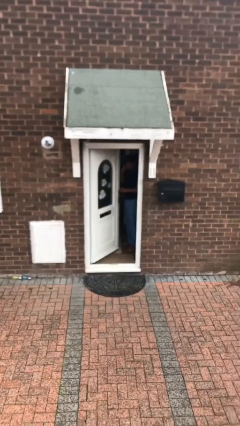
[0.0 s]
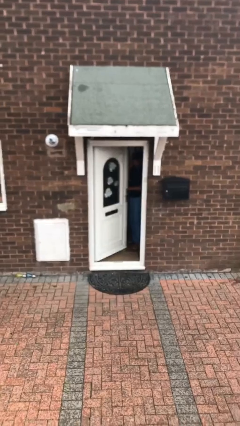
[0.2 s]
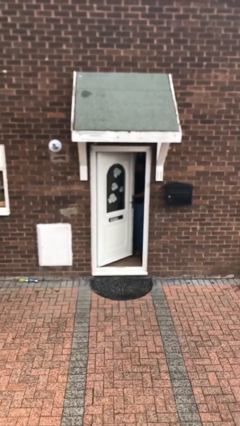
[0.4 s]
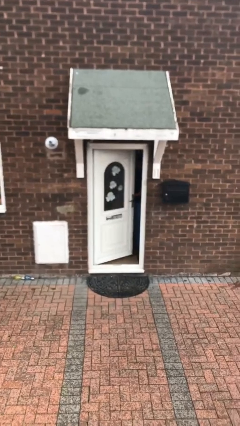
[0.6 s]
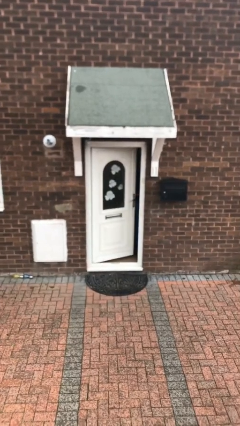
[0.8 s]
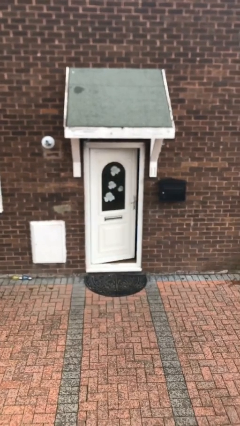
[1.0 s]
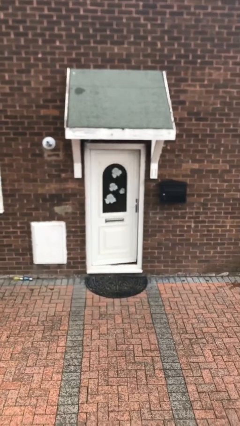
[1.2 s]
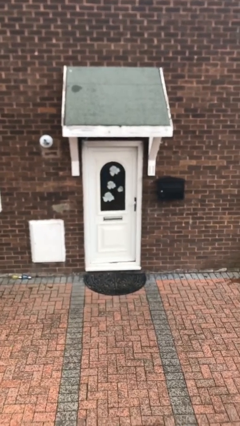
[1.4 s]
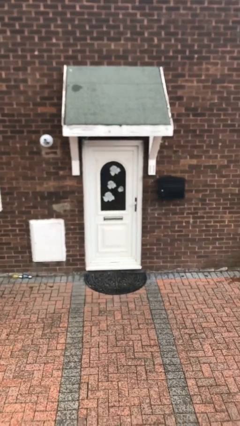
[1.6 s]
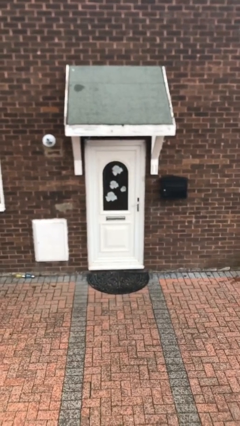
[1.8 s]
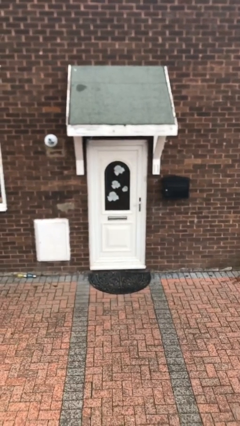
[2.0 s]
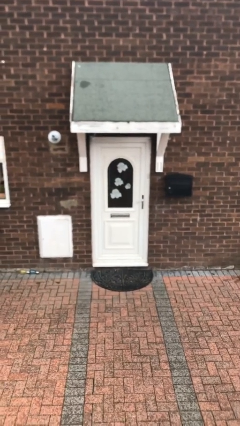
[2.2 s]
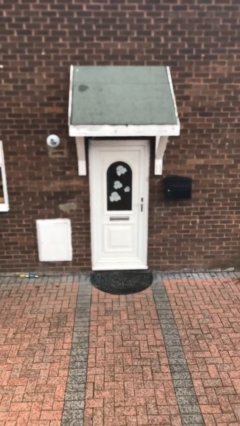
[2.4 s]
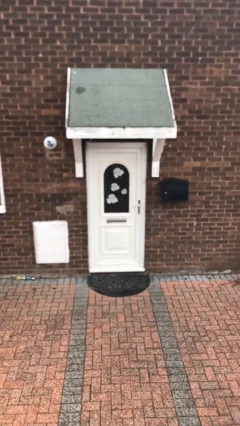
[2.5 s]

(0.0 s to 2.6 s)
person closes facility door

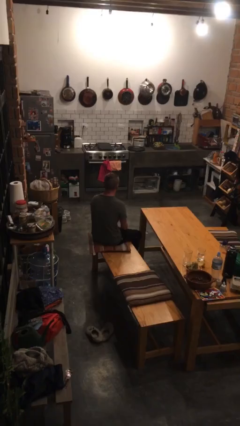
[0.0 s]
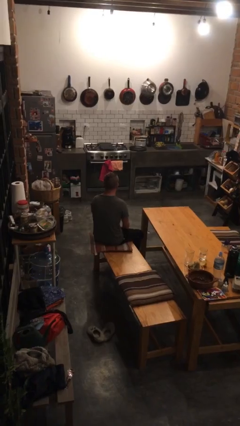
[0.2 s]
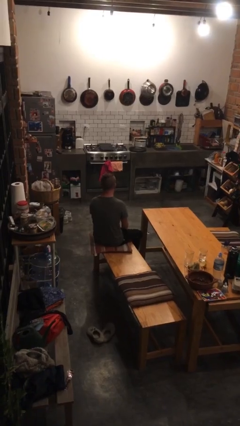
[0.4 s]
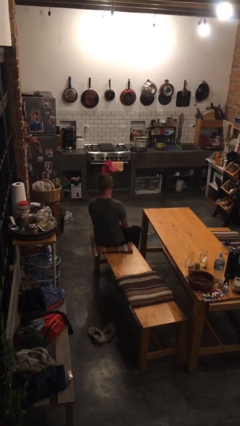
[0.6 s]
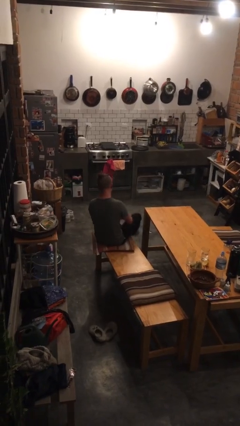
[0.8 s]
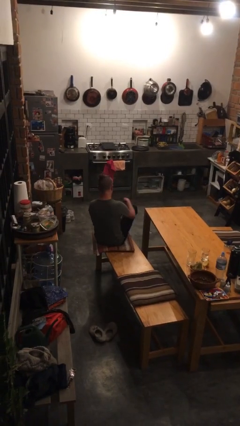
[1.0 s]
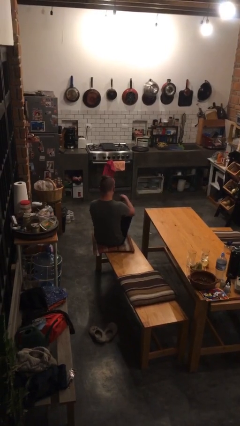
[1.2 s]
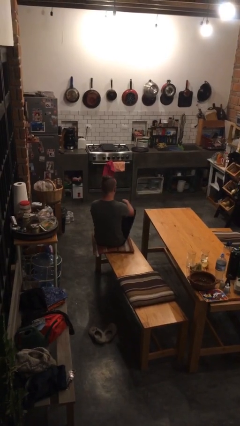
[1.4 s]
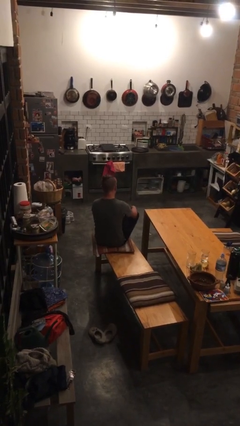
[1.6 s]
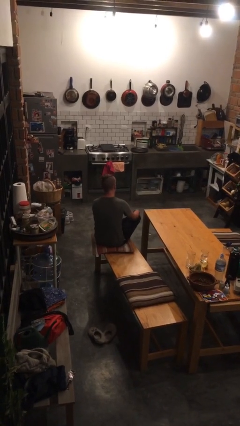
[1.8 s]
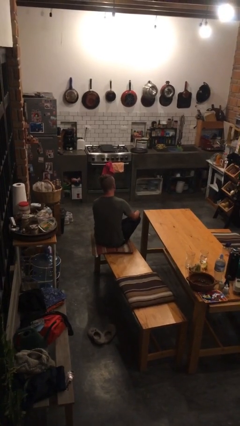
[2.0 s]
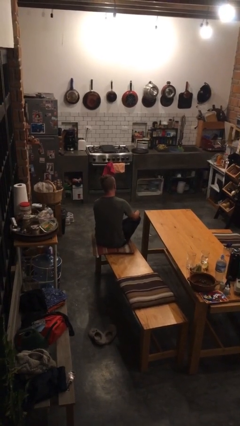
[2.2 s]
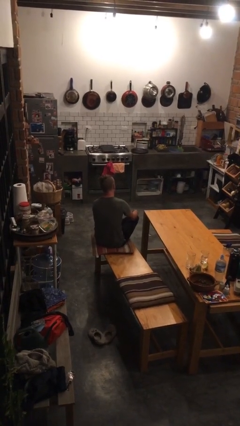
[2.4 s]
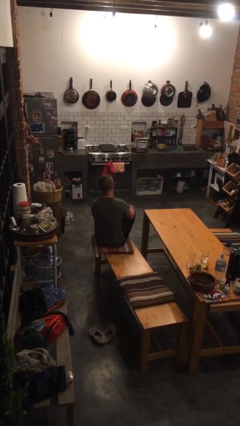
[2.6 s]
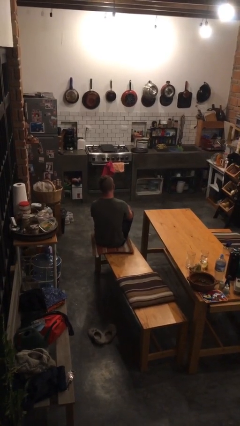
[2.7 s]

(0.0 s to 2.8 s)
person crosses legs

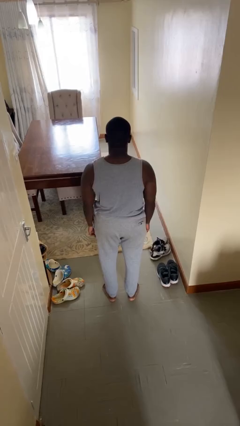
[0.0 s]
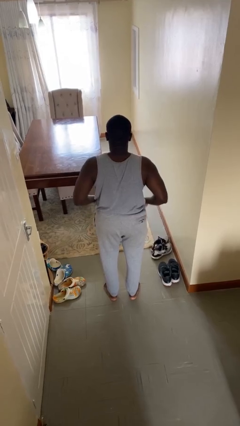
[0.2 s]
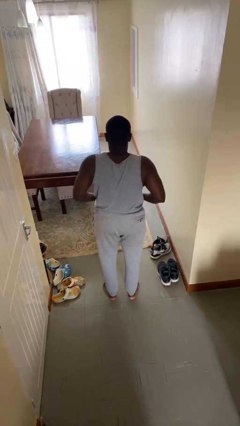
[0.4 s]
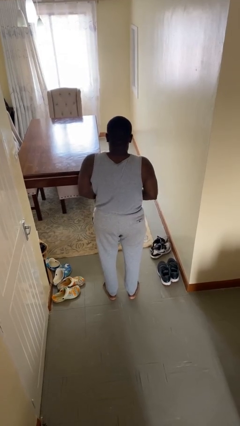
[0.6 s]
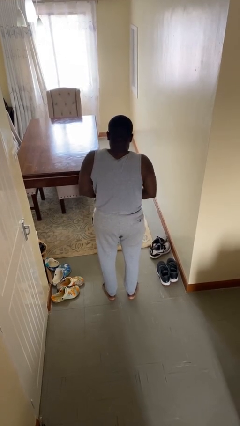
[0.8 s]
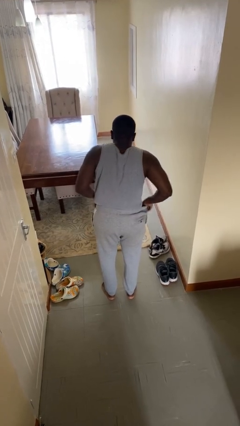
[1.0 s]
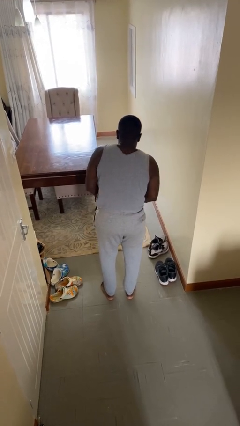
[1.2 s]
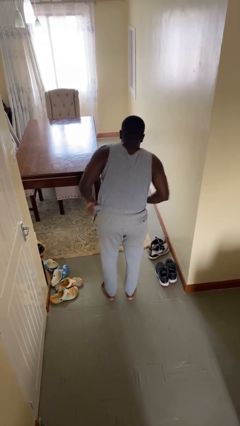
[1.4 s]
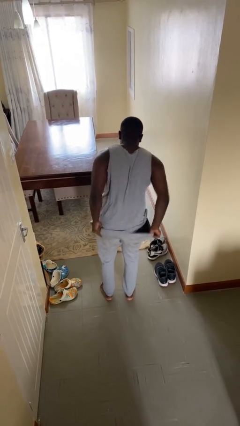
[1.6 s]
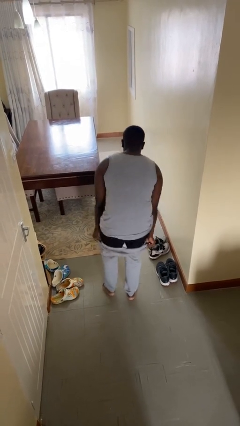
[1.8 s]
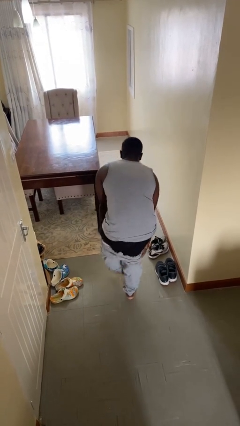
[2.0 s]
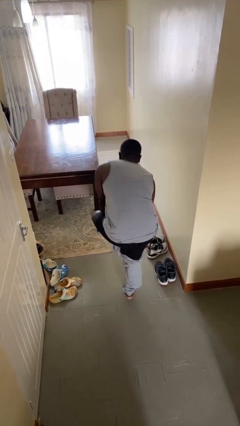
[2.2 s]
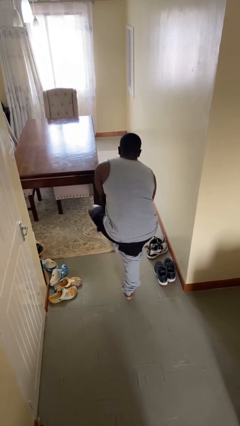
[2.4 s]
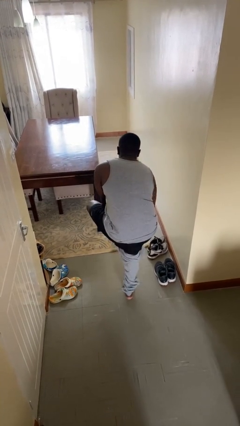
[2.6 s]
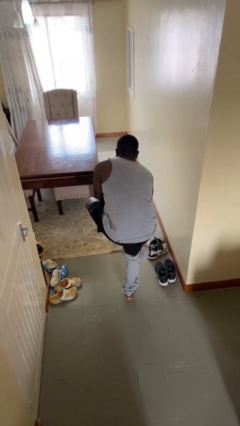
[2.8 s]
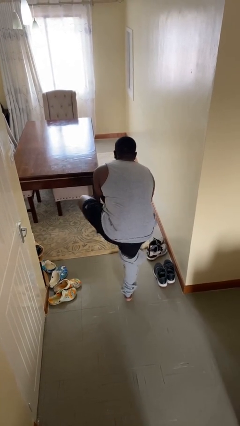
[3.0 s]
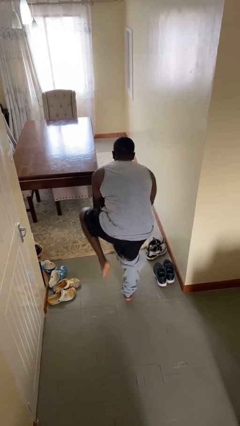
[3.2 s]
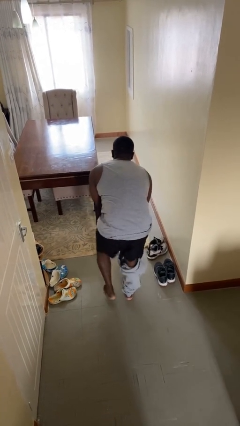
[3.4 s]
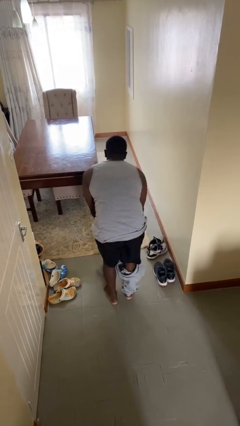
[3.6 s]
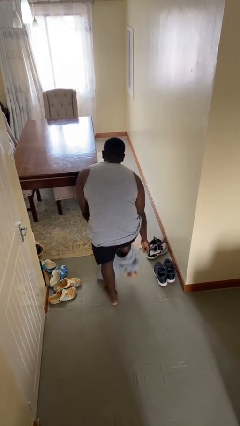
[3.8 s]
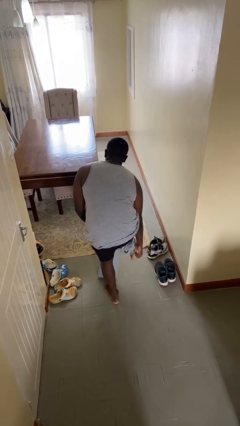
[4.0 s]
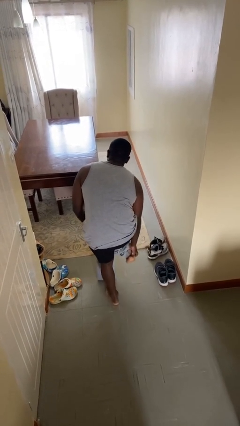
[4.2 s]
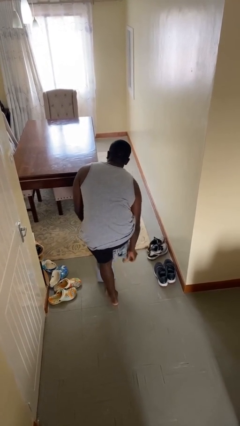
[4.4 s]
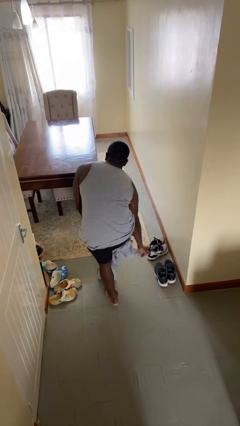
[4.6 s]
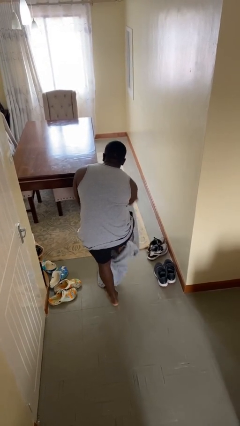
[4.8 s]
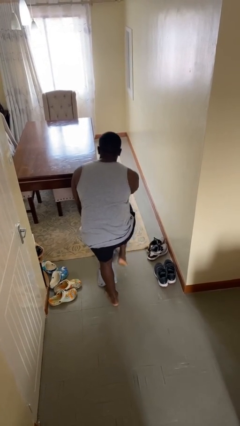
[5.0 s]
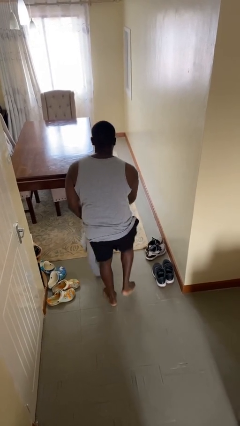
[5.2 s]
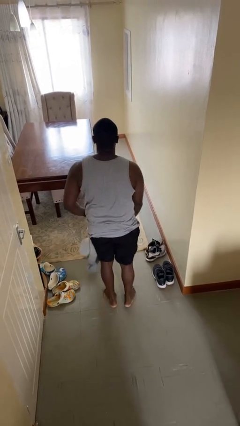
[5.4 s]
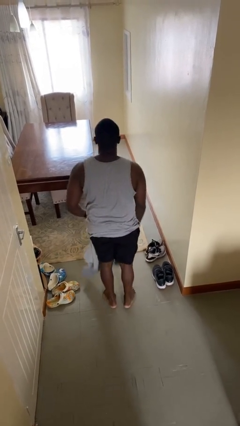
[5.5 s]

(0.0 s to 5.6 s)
person takes off pants

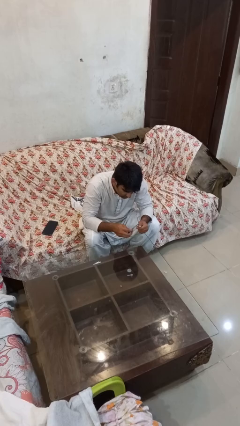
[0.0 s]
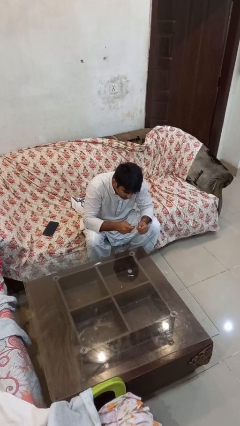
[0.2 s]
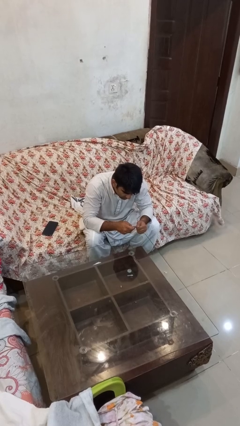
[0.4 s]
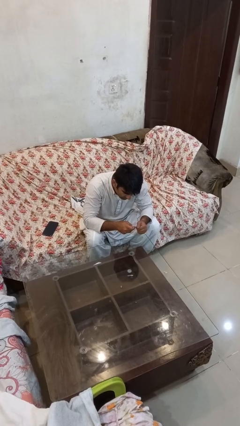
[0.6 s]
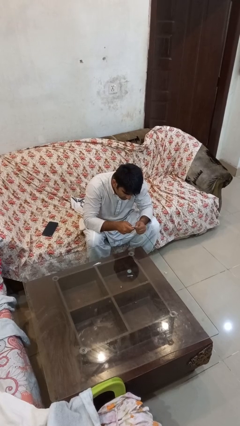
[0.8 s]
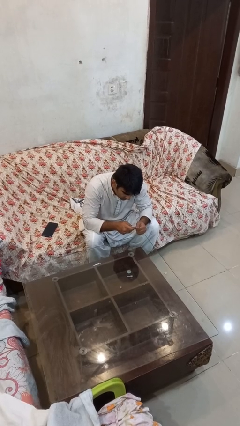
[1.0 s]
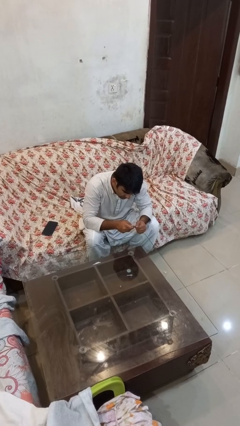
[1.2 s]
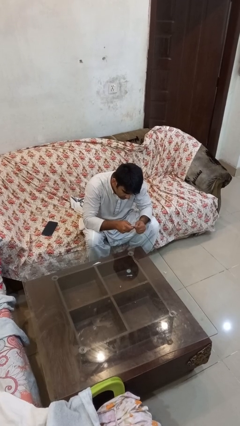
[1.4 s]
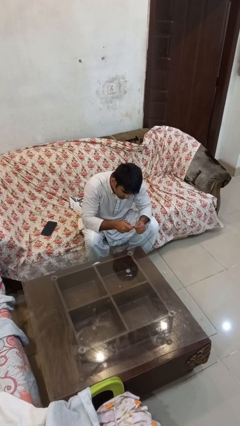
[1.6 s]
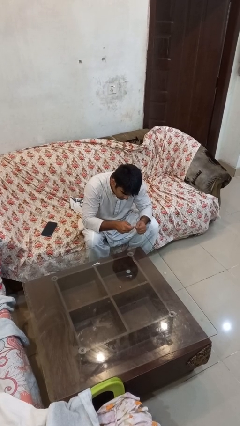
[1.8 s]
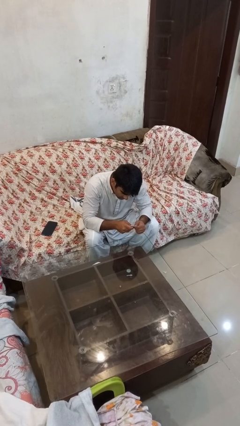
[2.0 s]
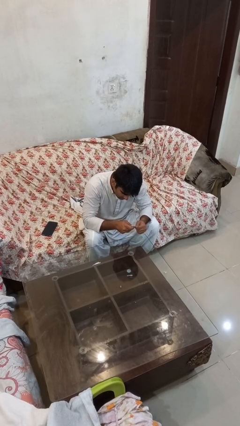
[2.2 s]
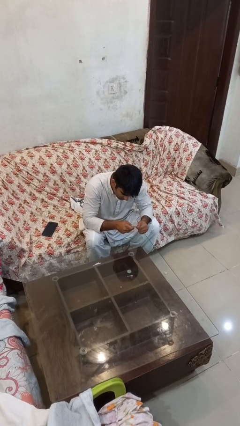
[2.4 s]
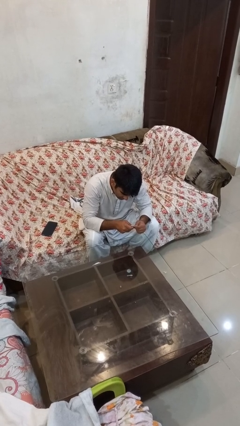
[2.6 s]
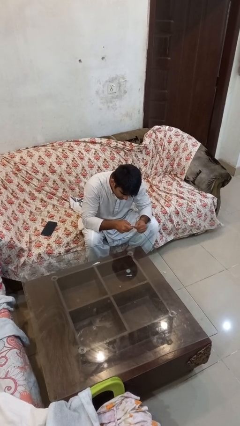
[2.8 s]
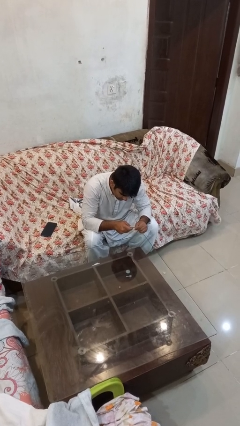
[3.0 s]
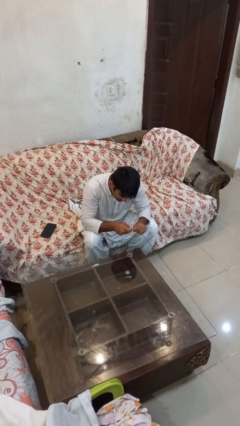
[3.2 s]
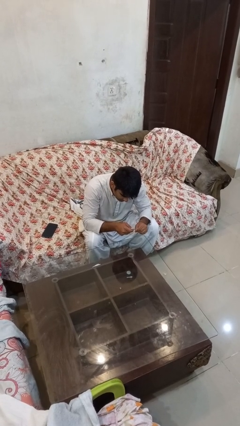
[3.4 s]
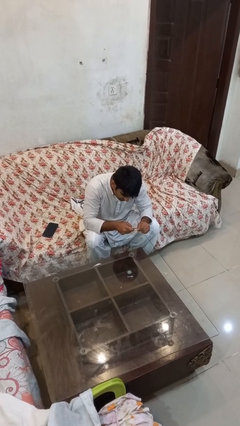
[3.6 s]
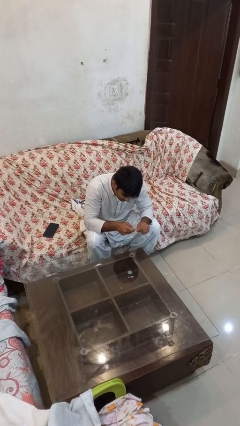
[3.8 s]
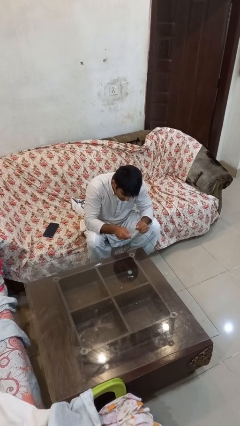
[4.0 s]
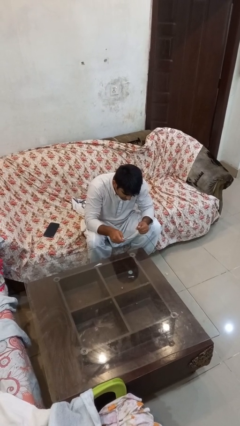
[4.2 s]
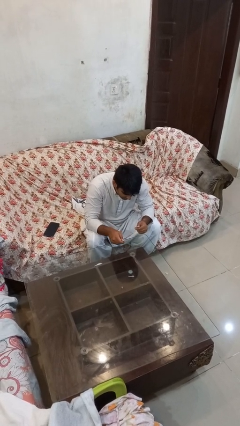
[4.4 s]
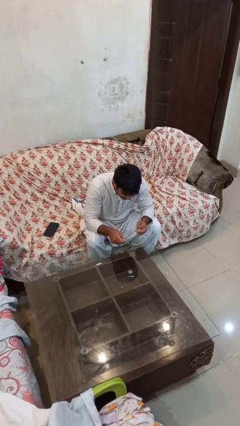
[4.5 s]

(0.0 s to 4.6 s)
person files fingernails

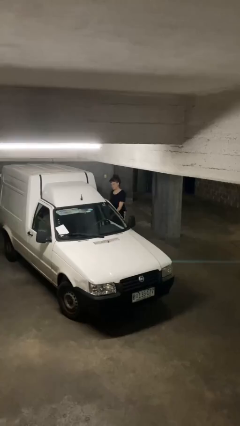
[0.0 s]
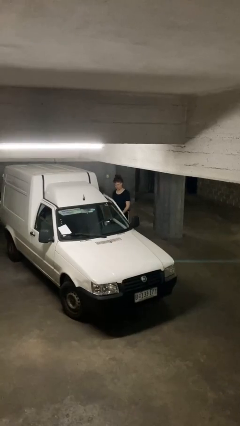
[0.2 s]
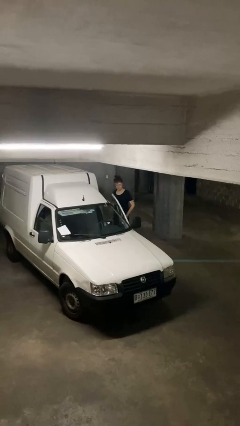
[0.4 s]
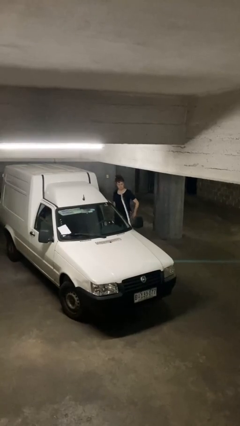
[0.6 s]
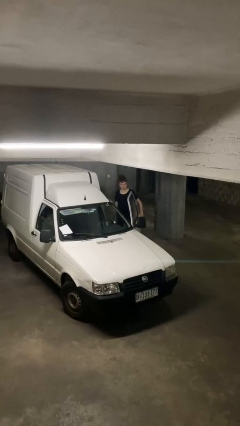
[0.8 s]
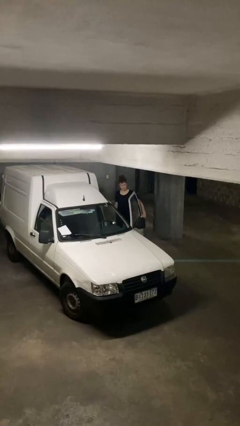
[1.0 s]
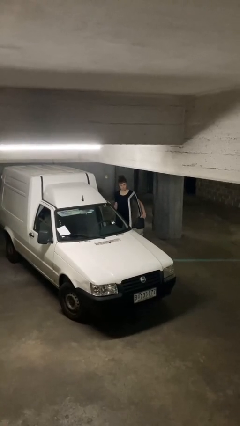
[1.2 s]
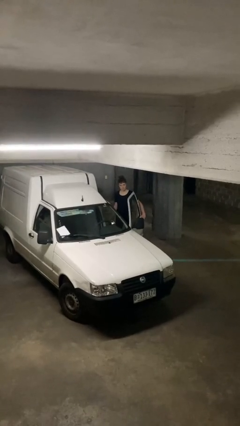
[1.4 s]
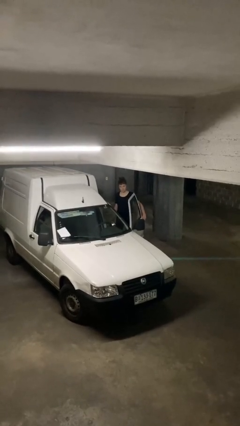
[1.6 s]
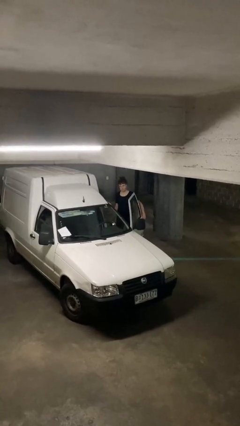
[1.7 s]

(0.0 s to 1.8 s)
person opens car door
